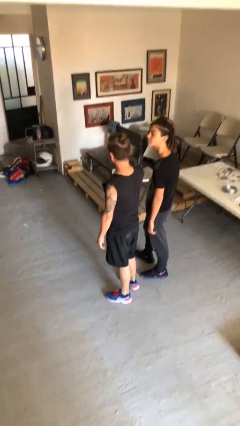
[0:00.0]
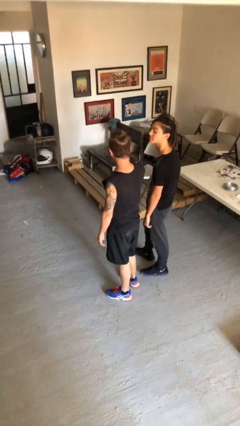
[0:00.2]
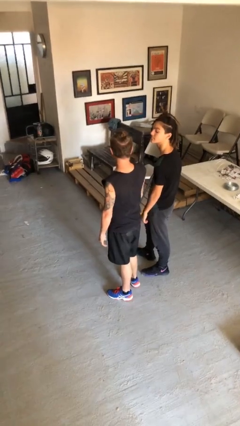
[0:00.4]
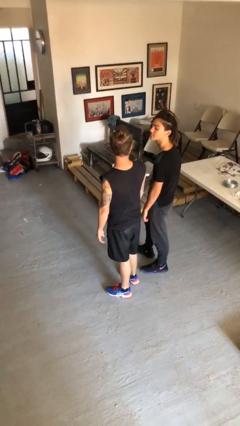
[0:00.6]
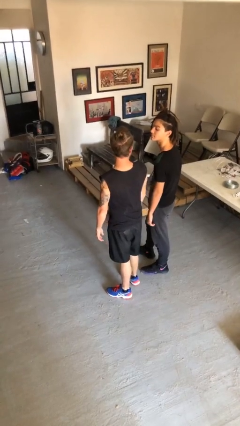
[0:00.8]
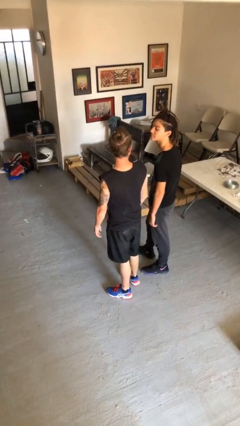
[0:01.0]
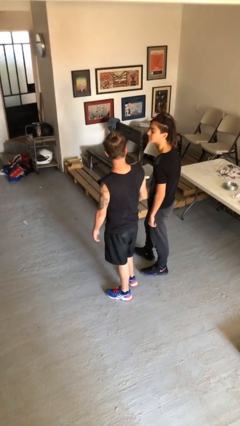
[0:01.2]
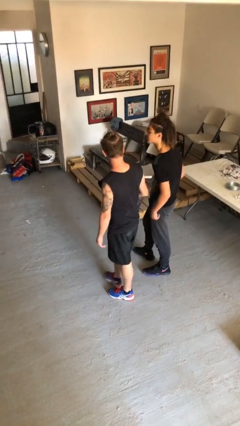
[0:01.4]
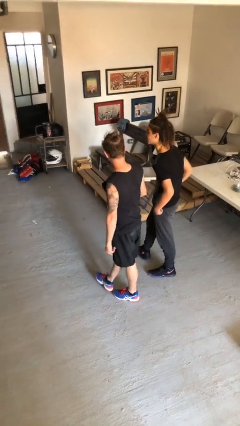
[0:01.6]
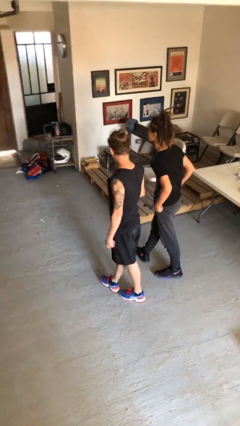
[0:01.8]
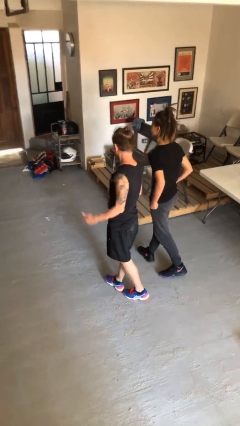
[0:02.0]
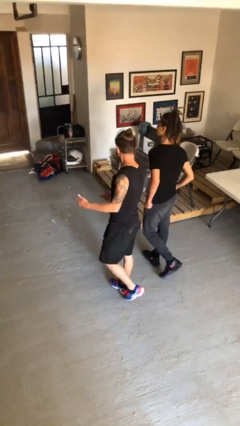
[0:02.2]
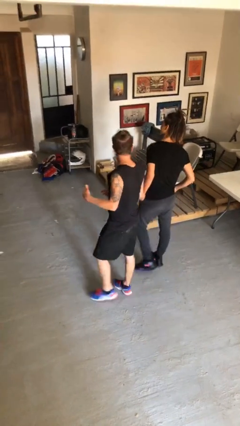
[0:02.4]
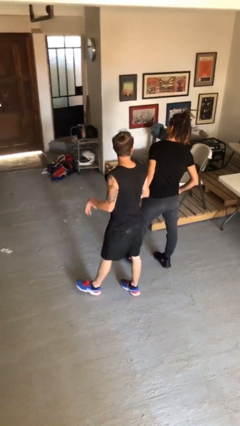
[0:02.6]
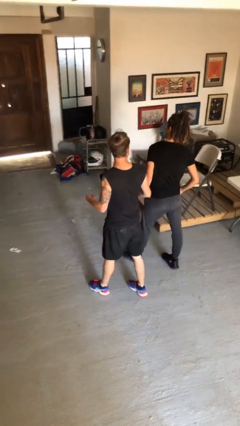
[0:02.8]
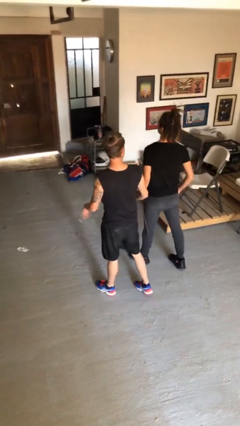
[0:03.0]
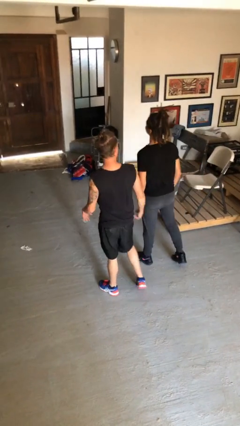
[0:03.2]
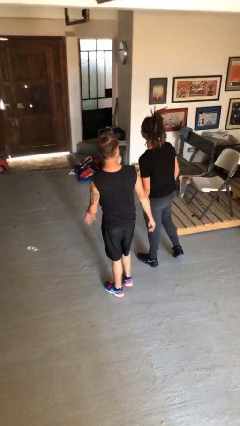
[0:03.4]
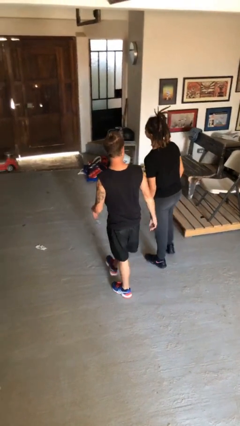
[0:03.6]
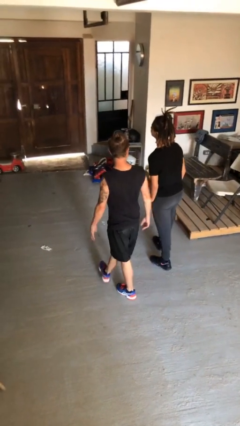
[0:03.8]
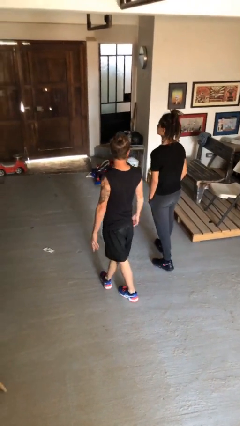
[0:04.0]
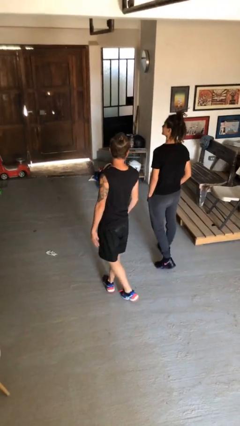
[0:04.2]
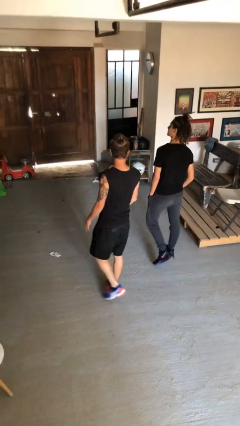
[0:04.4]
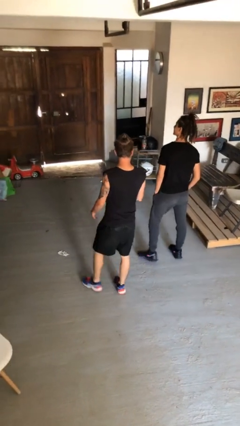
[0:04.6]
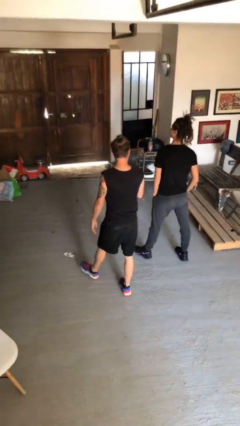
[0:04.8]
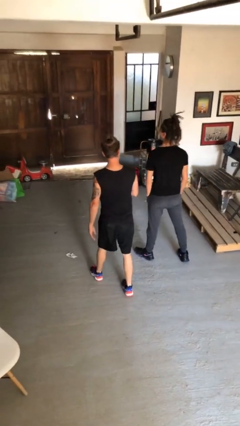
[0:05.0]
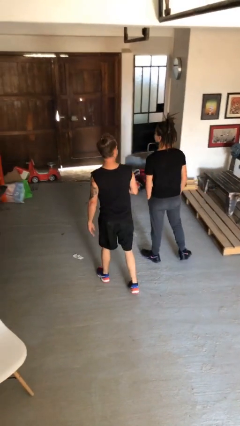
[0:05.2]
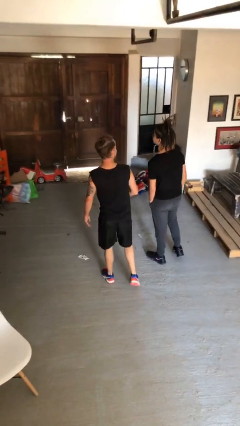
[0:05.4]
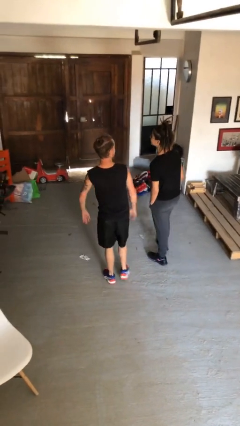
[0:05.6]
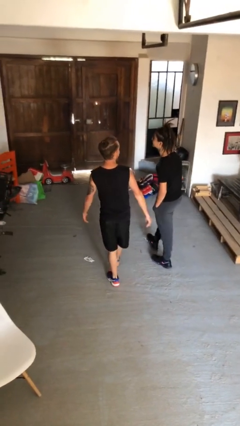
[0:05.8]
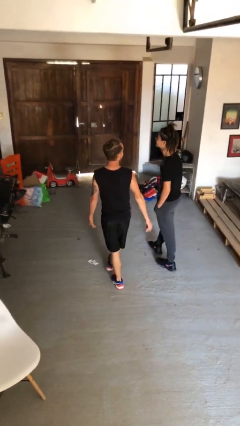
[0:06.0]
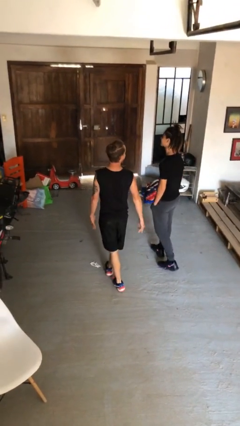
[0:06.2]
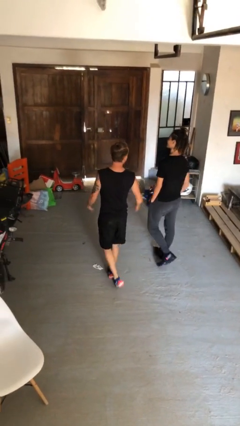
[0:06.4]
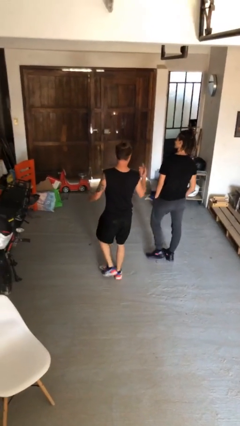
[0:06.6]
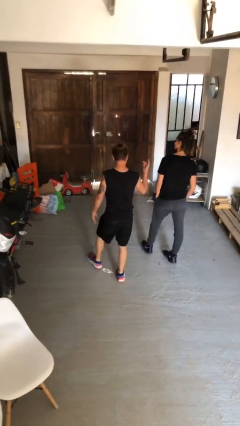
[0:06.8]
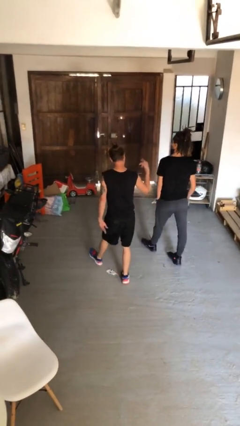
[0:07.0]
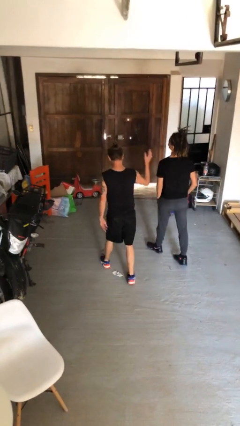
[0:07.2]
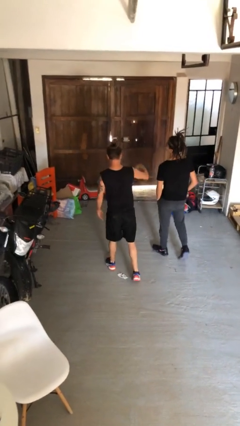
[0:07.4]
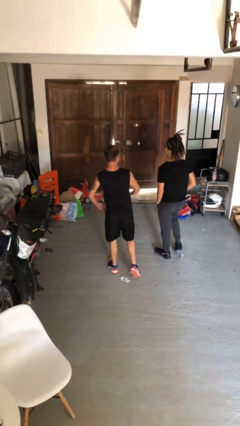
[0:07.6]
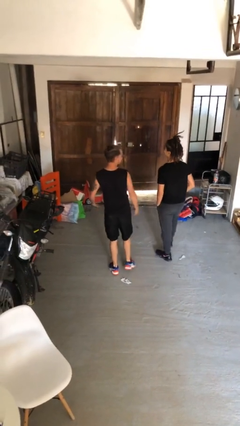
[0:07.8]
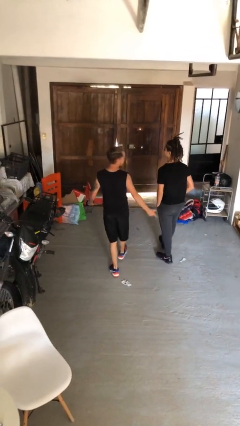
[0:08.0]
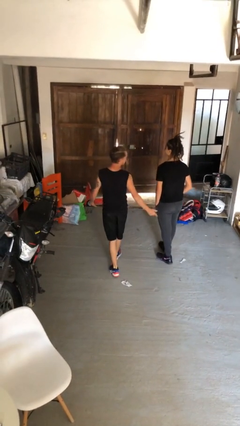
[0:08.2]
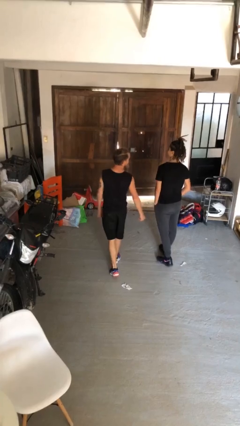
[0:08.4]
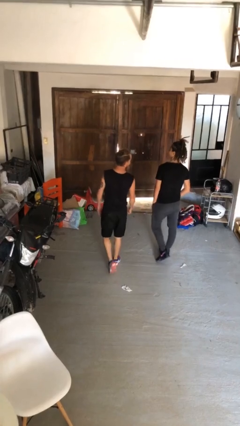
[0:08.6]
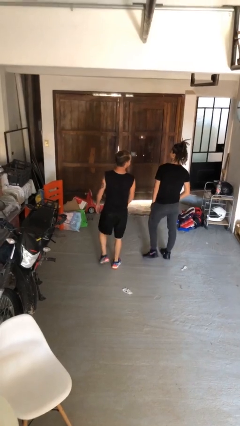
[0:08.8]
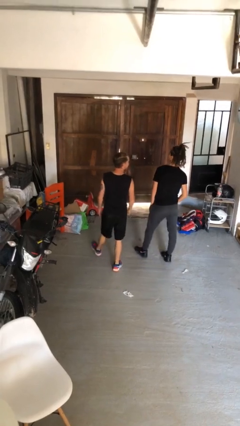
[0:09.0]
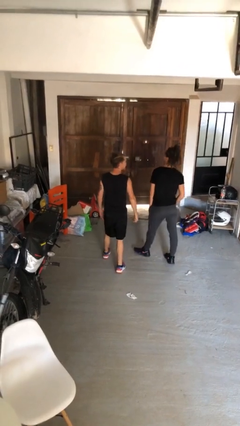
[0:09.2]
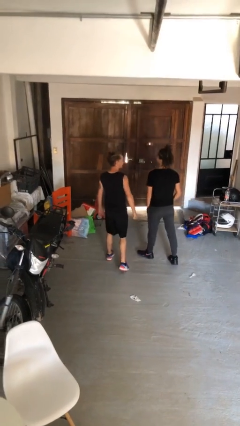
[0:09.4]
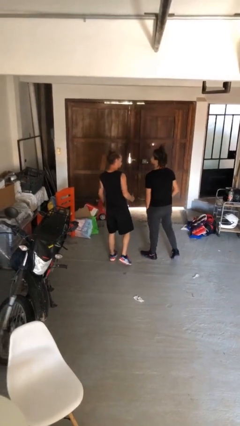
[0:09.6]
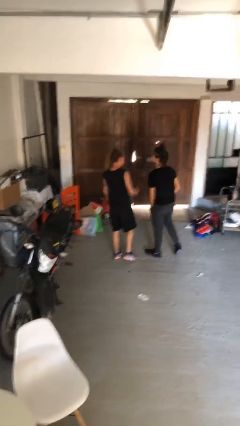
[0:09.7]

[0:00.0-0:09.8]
person talks to person

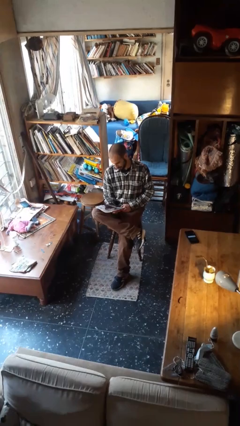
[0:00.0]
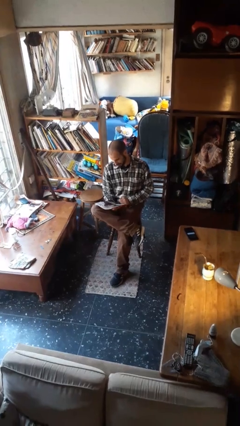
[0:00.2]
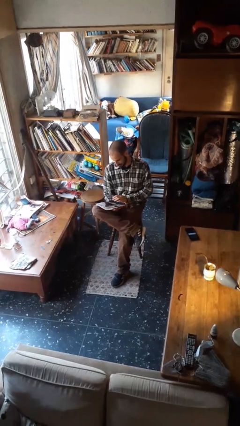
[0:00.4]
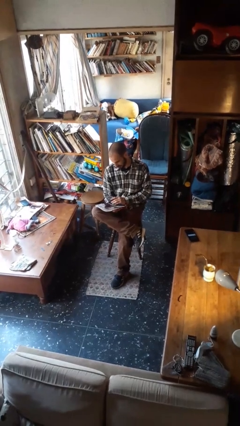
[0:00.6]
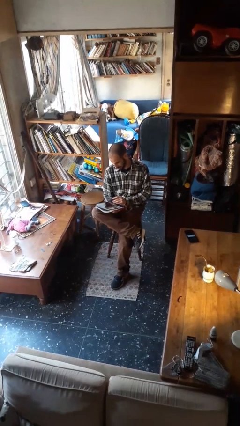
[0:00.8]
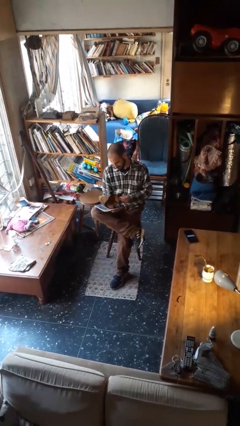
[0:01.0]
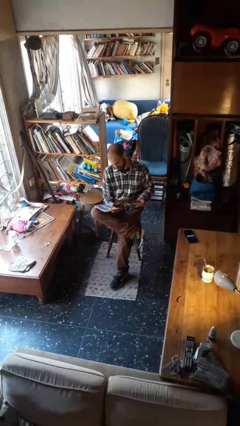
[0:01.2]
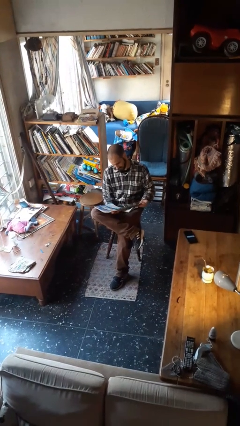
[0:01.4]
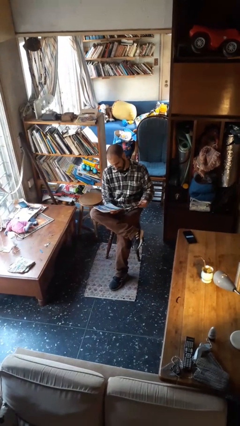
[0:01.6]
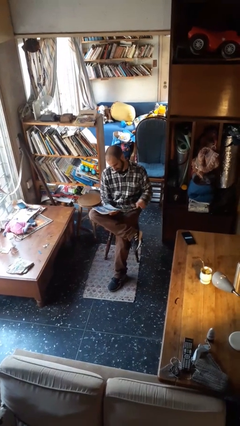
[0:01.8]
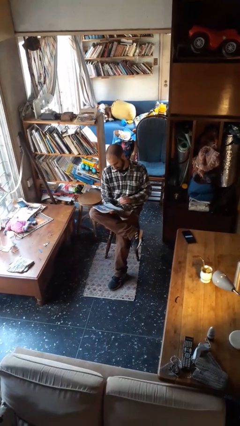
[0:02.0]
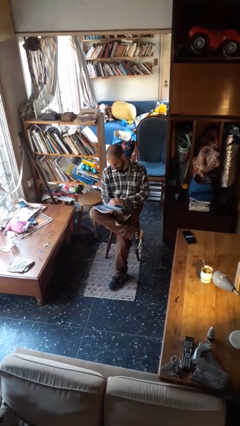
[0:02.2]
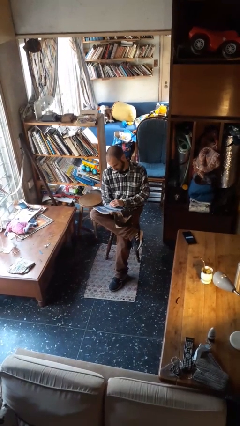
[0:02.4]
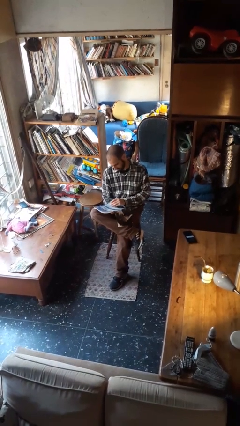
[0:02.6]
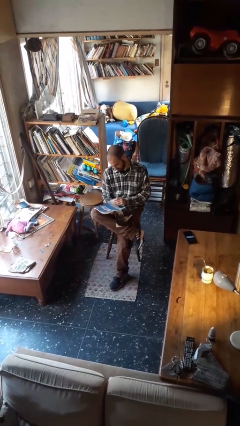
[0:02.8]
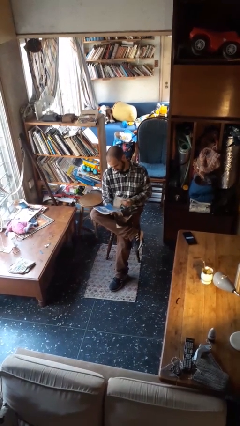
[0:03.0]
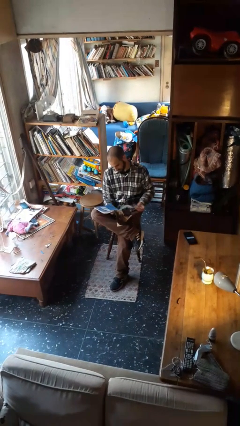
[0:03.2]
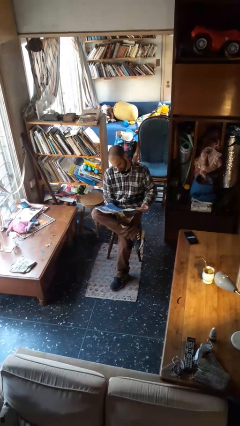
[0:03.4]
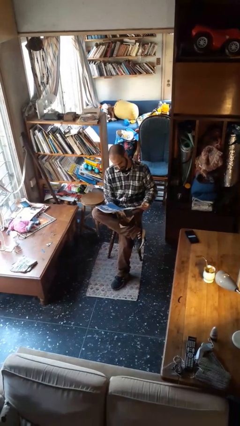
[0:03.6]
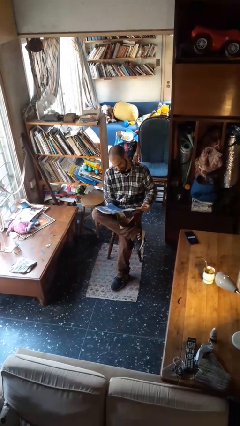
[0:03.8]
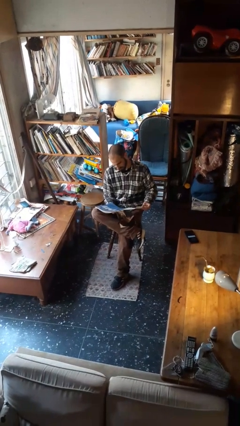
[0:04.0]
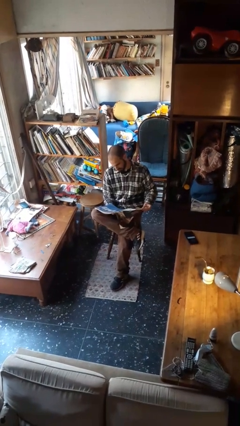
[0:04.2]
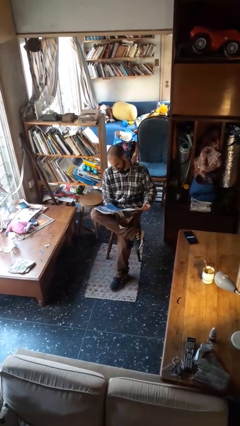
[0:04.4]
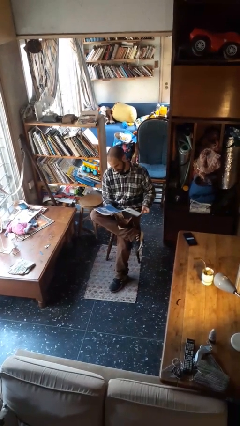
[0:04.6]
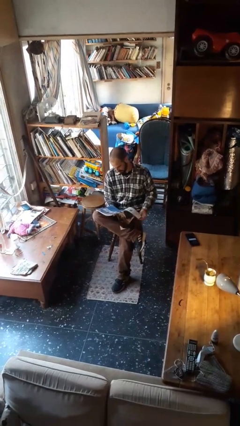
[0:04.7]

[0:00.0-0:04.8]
person reads magazine

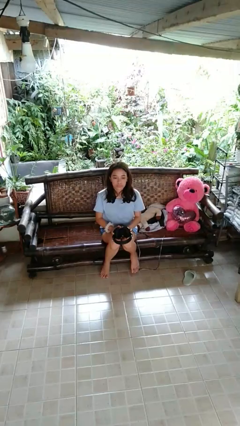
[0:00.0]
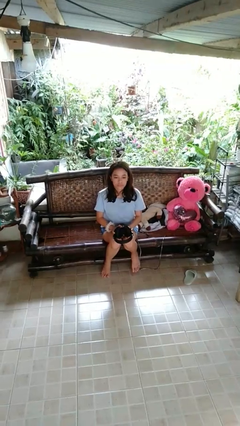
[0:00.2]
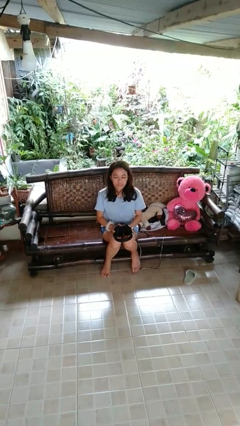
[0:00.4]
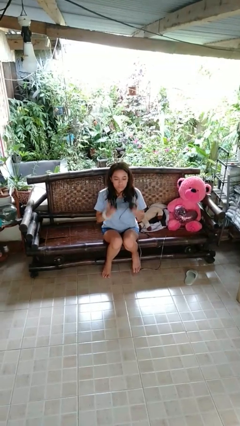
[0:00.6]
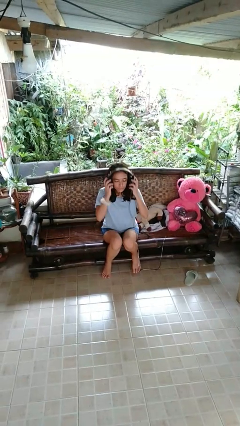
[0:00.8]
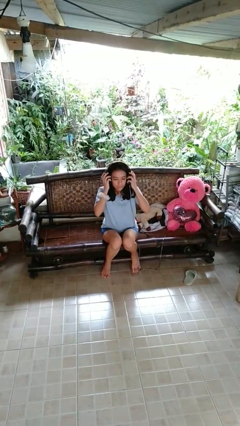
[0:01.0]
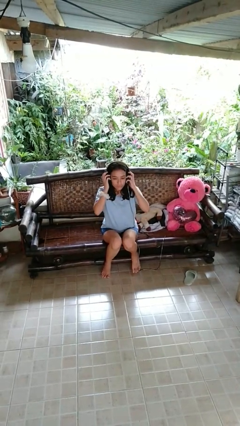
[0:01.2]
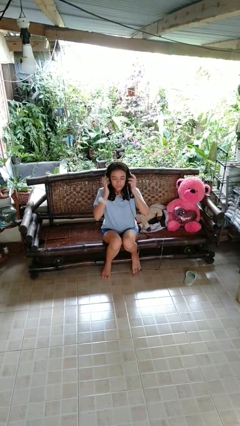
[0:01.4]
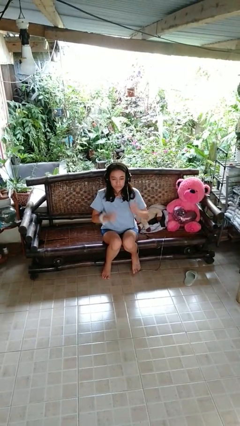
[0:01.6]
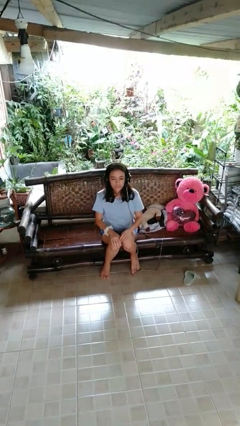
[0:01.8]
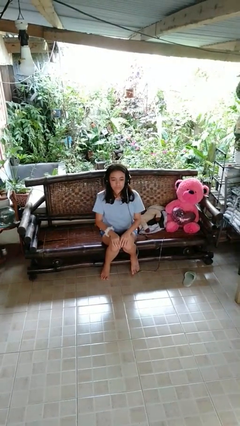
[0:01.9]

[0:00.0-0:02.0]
person puts on headphones

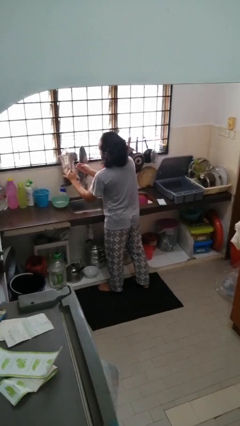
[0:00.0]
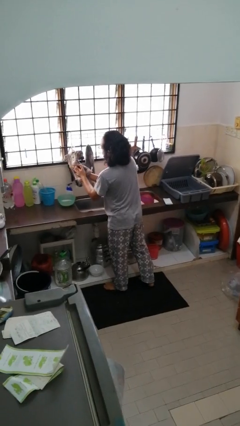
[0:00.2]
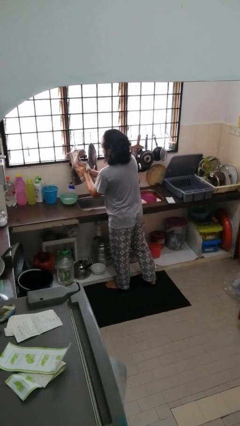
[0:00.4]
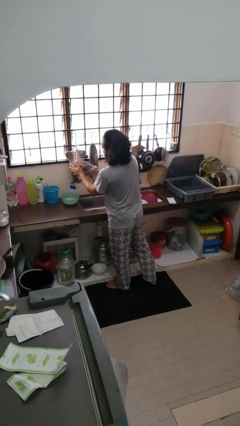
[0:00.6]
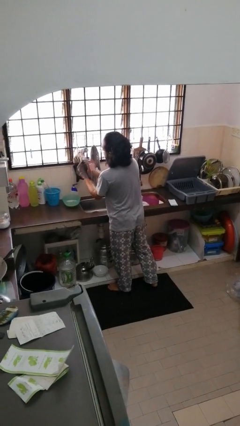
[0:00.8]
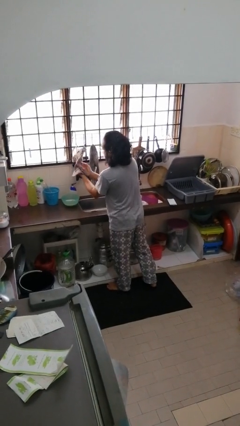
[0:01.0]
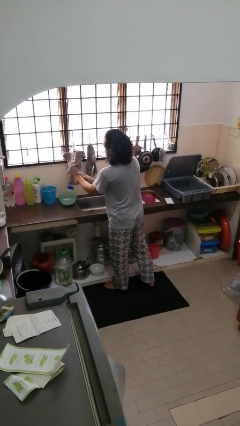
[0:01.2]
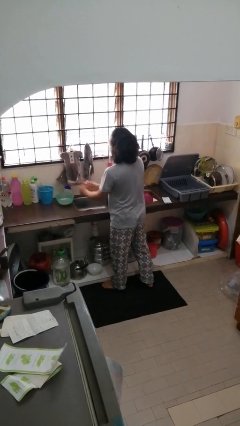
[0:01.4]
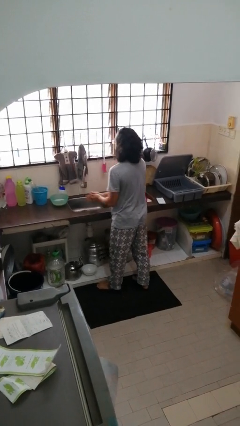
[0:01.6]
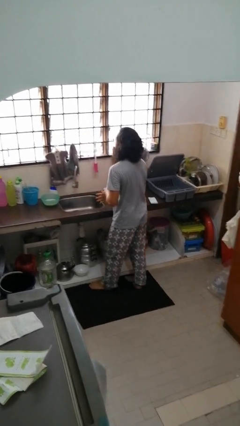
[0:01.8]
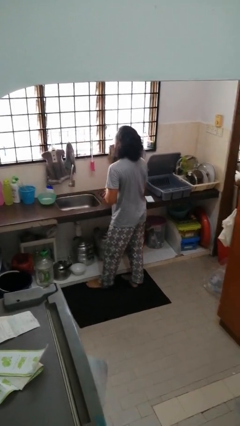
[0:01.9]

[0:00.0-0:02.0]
person dries hands with towel
